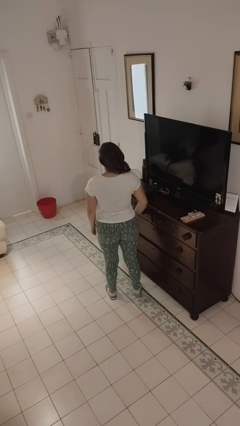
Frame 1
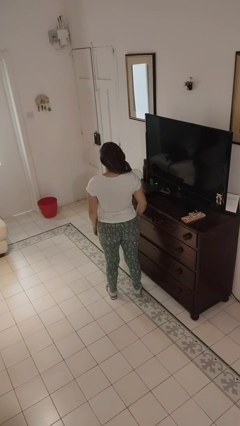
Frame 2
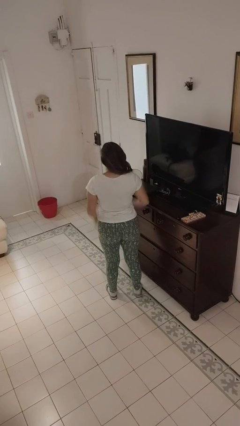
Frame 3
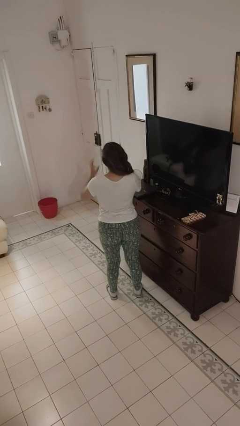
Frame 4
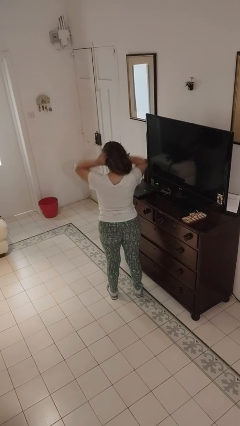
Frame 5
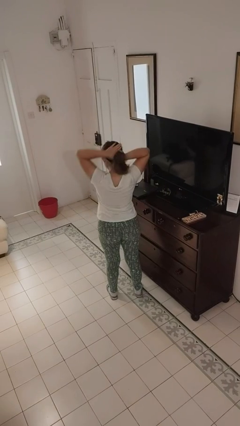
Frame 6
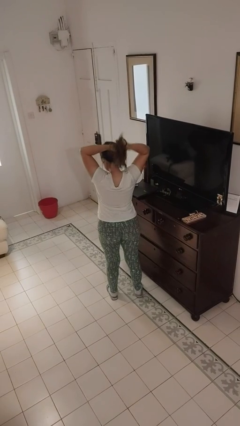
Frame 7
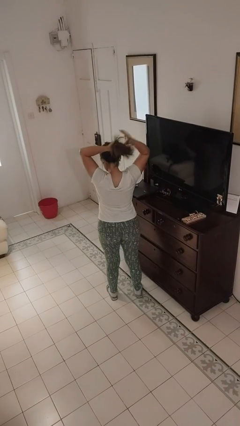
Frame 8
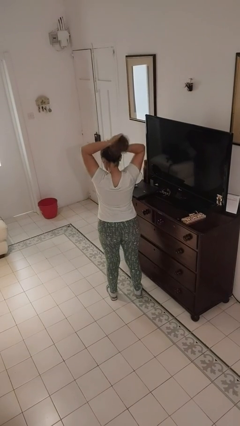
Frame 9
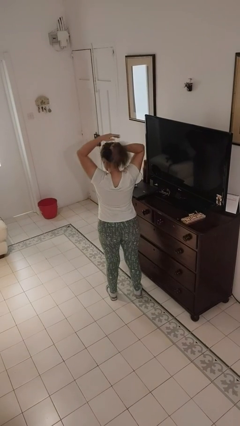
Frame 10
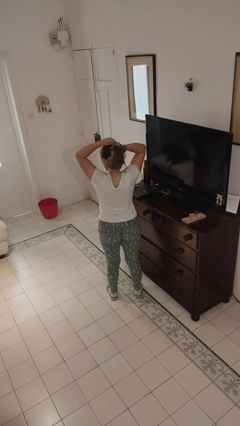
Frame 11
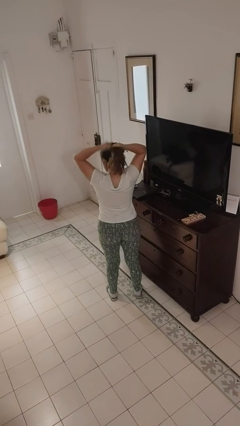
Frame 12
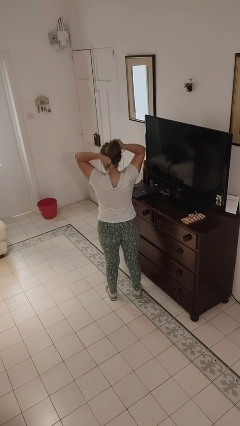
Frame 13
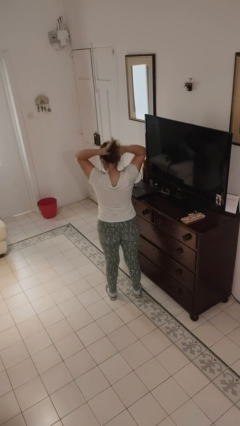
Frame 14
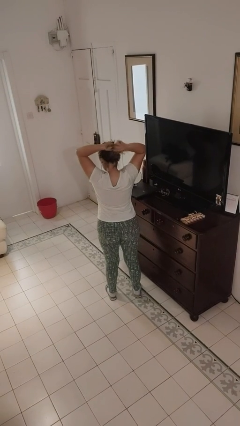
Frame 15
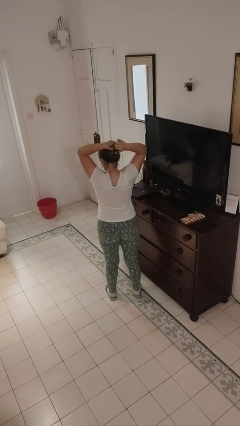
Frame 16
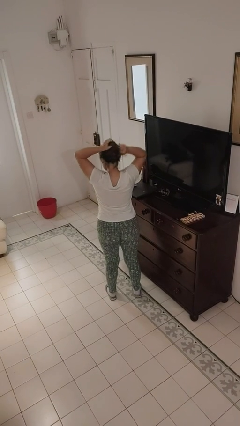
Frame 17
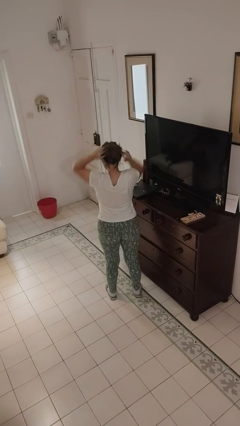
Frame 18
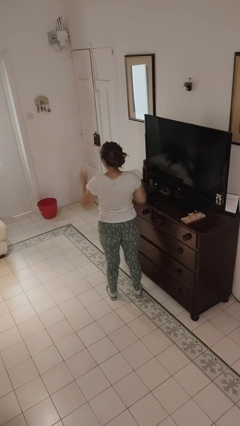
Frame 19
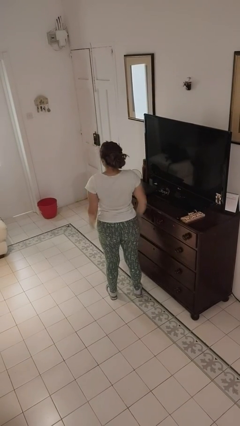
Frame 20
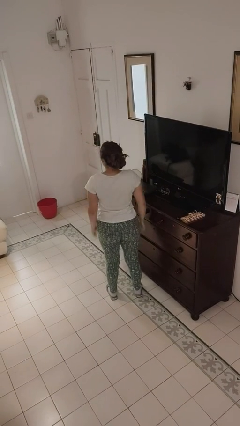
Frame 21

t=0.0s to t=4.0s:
person puts hair in ponytail

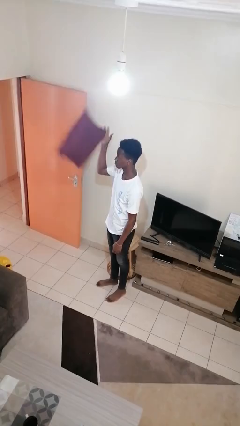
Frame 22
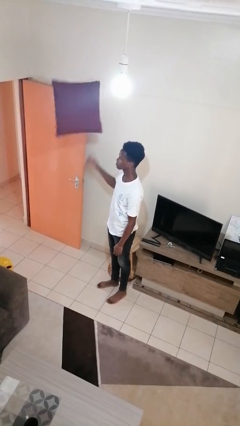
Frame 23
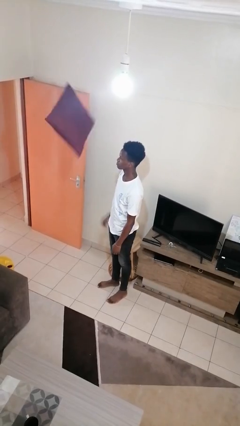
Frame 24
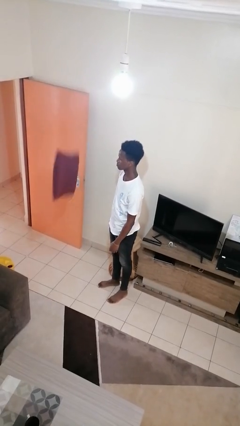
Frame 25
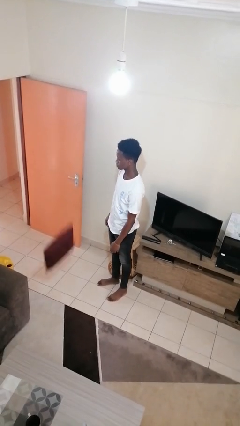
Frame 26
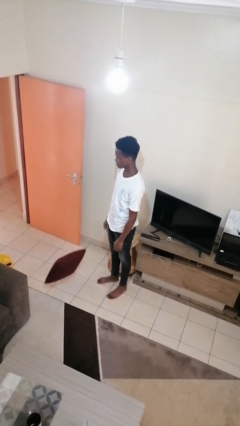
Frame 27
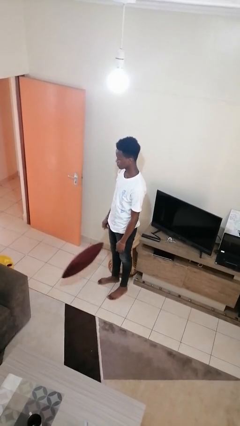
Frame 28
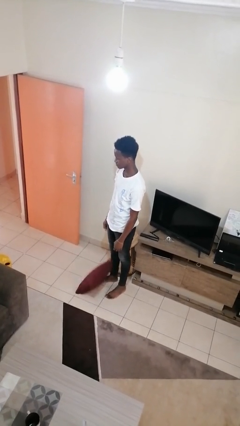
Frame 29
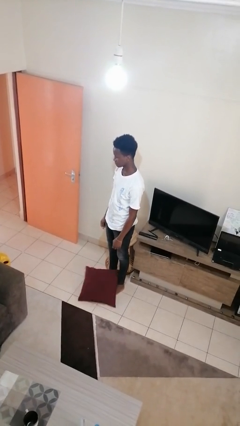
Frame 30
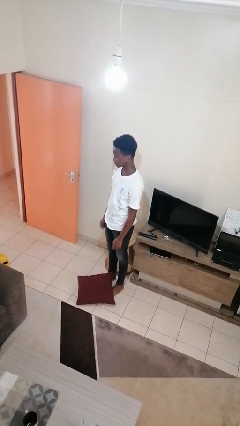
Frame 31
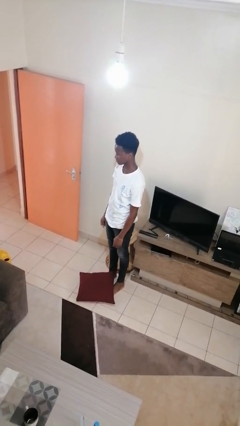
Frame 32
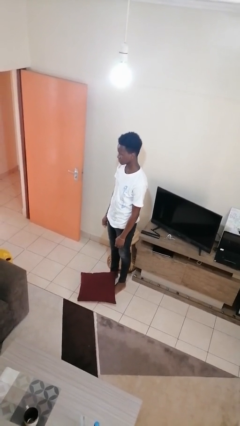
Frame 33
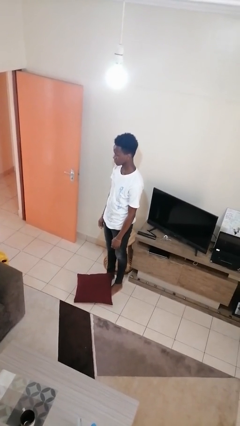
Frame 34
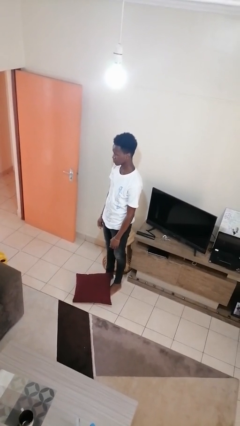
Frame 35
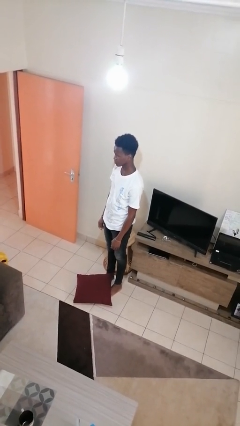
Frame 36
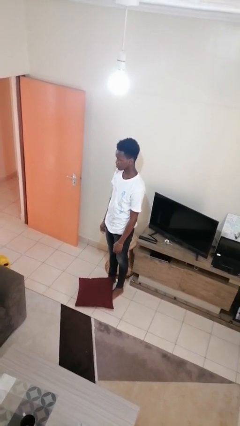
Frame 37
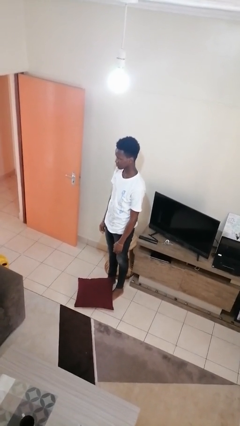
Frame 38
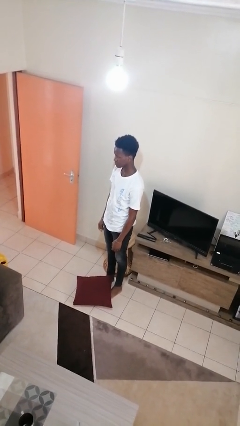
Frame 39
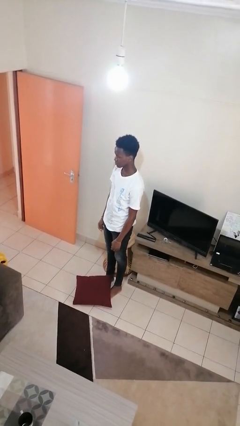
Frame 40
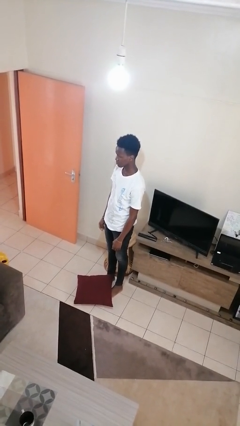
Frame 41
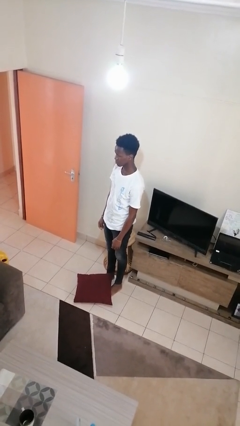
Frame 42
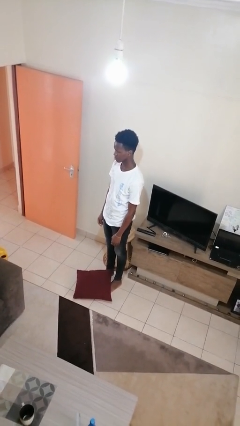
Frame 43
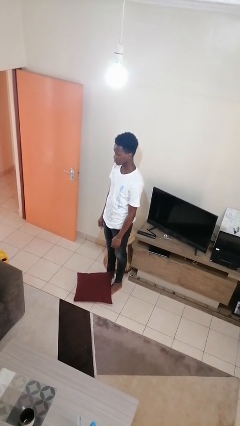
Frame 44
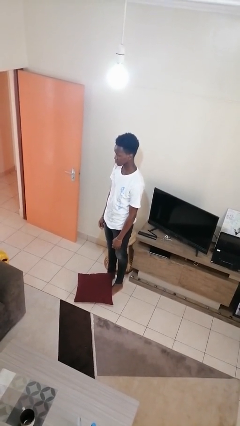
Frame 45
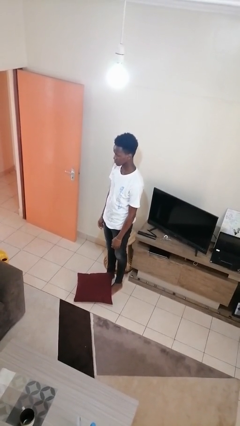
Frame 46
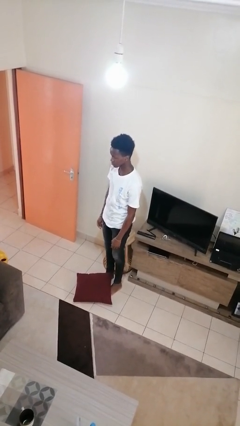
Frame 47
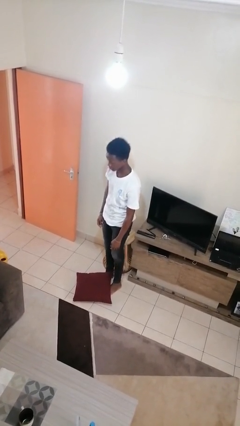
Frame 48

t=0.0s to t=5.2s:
person throws object into air

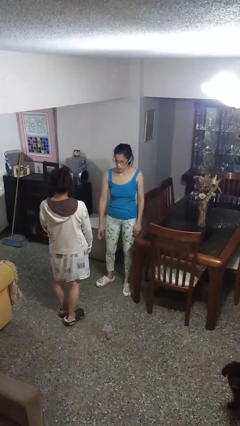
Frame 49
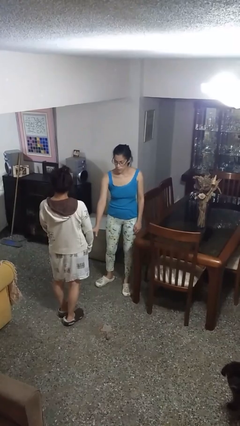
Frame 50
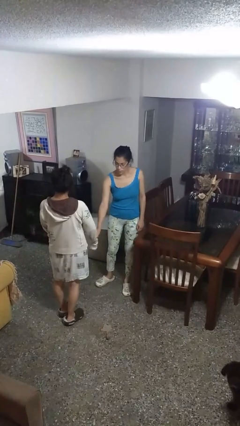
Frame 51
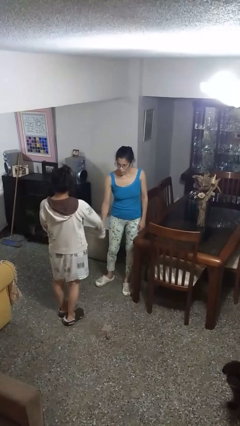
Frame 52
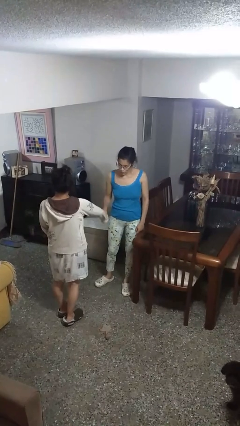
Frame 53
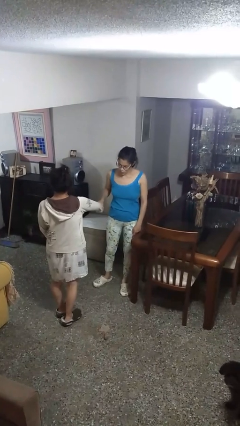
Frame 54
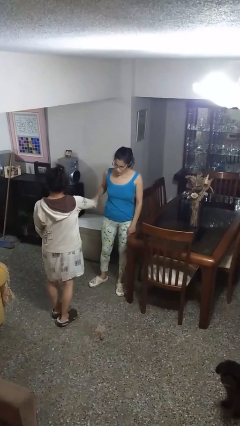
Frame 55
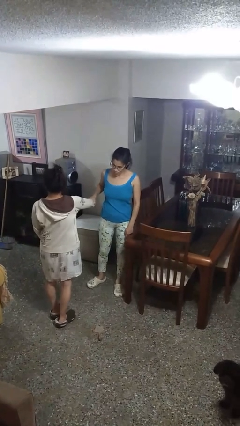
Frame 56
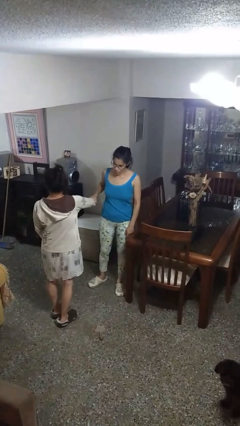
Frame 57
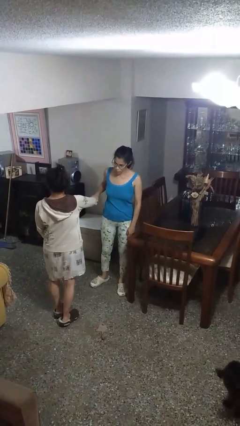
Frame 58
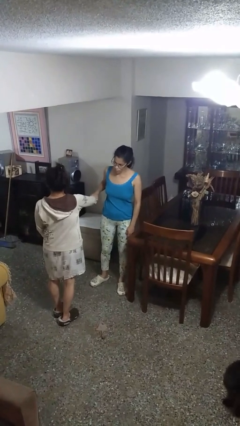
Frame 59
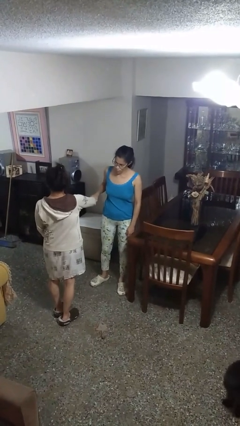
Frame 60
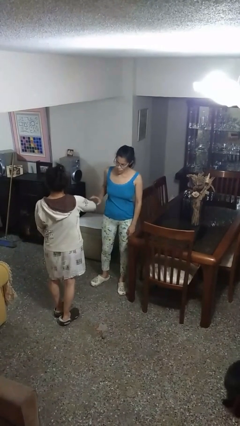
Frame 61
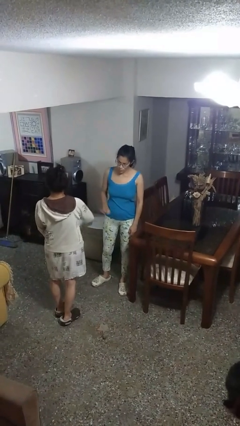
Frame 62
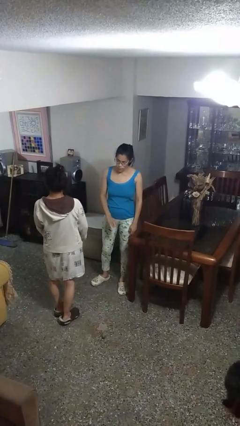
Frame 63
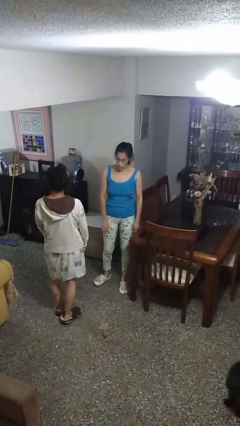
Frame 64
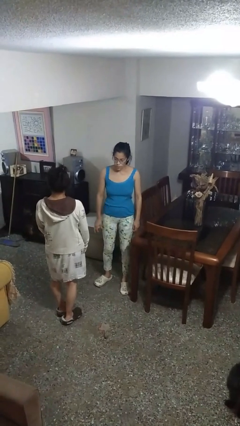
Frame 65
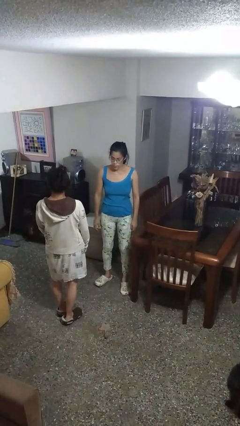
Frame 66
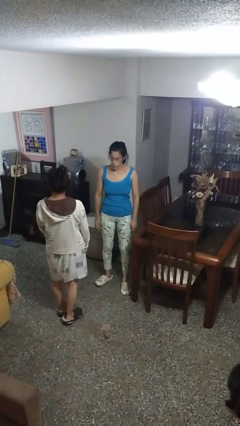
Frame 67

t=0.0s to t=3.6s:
person grabs person by forearm

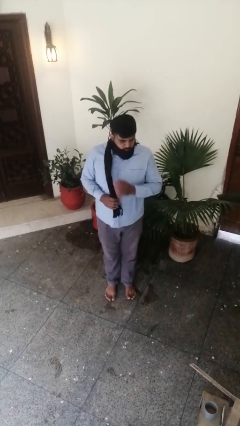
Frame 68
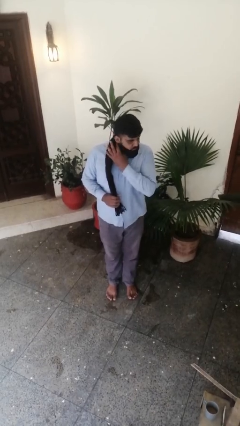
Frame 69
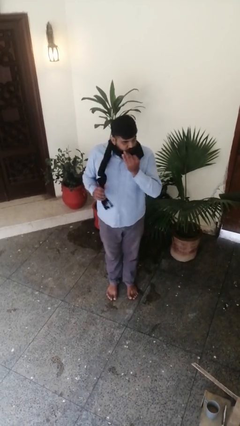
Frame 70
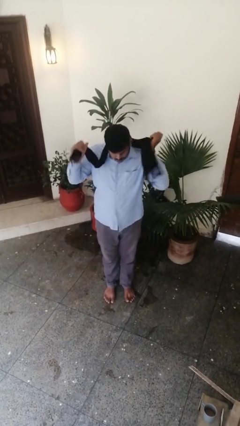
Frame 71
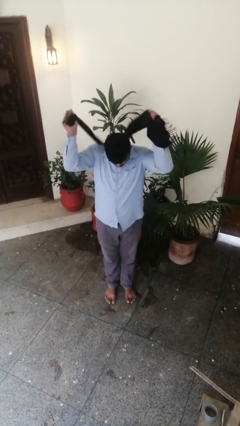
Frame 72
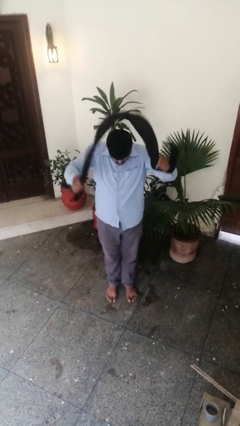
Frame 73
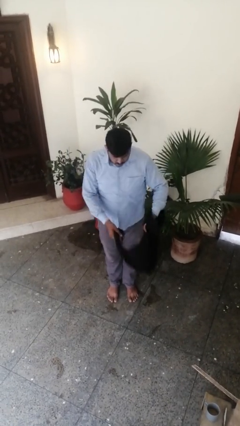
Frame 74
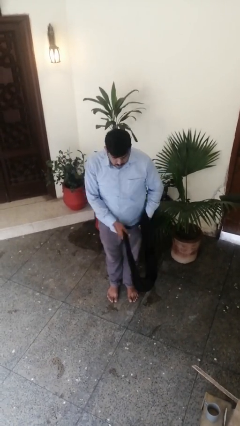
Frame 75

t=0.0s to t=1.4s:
person takes off scarf

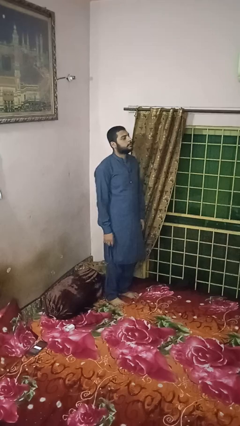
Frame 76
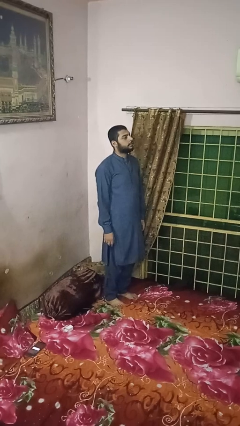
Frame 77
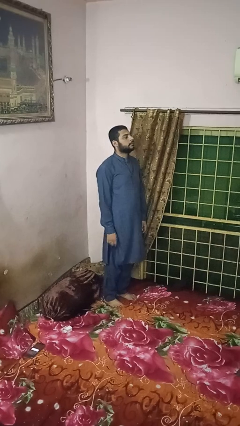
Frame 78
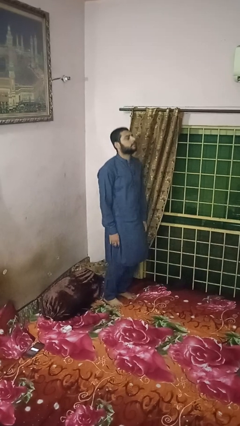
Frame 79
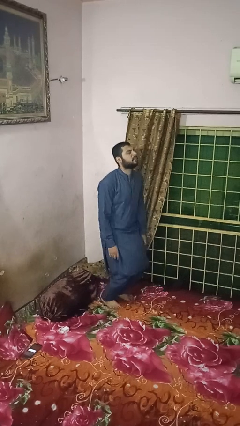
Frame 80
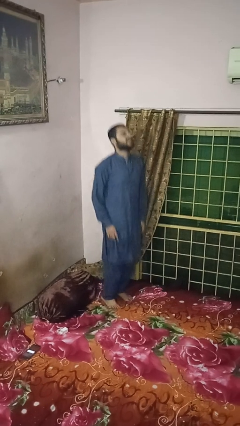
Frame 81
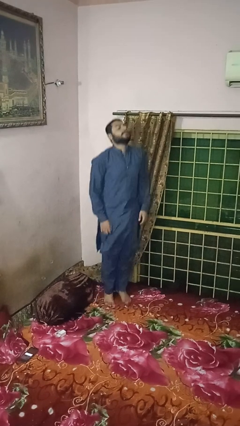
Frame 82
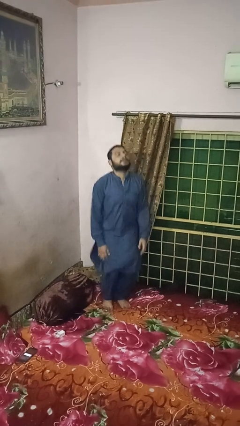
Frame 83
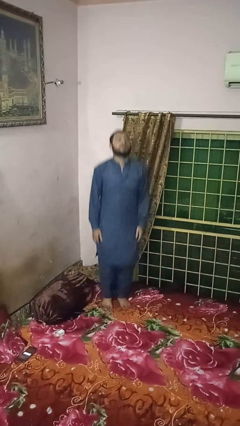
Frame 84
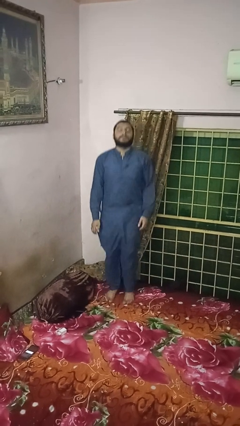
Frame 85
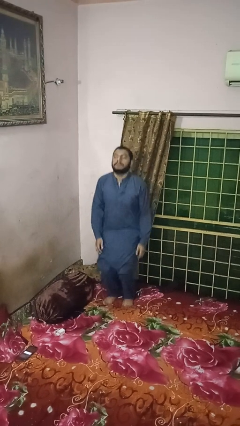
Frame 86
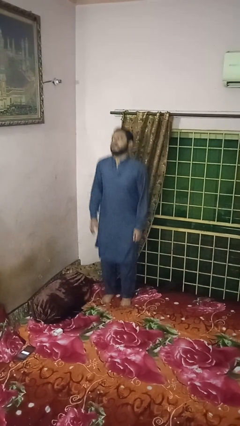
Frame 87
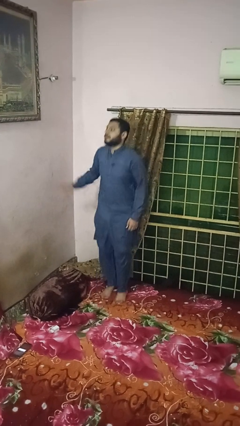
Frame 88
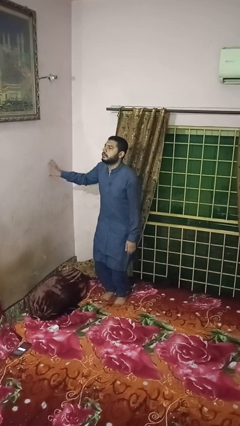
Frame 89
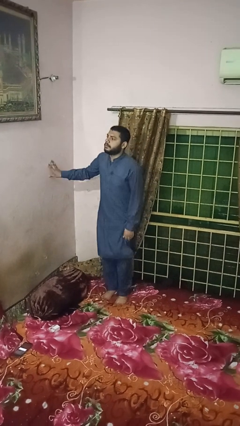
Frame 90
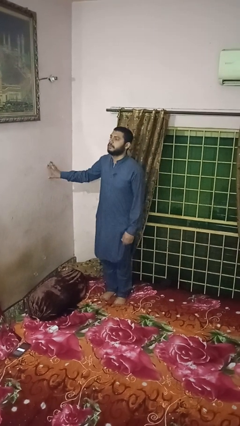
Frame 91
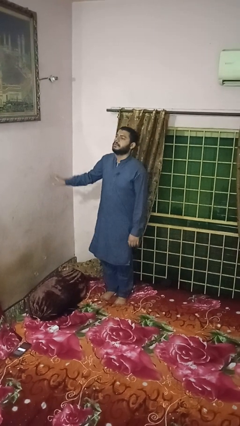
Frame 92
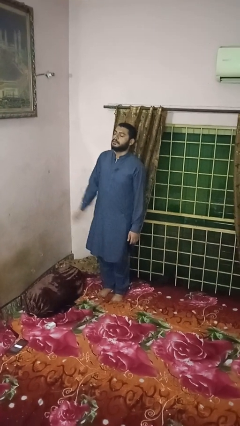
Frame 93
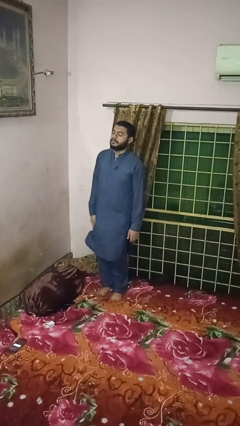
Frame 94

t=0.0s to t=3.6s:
person jumps on bed
